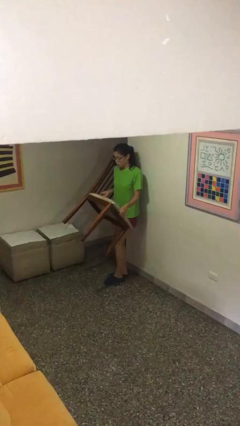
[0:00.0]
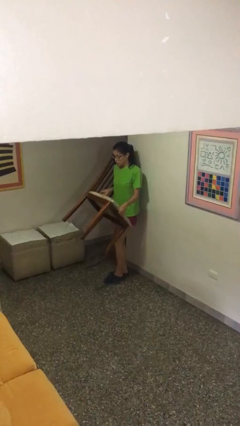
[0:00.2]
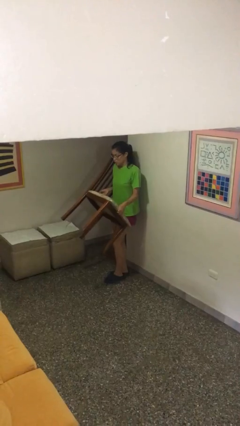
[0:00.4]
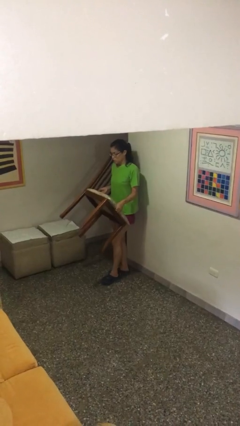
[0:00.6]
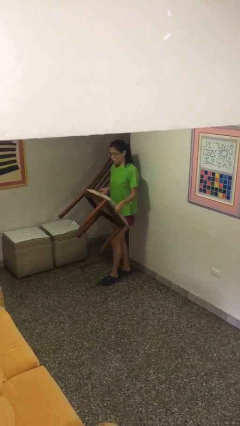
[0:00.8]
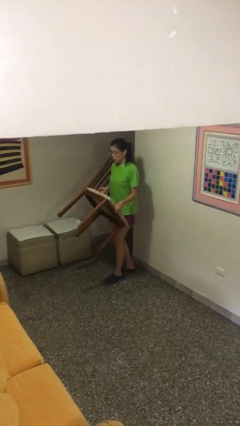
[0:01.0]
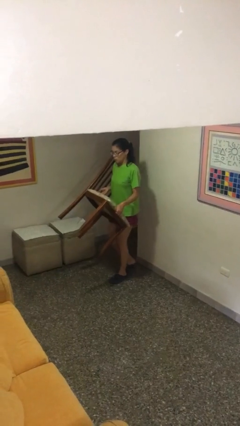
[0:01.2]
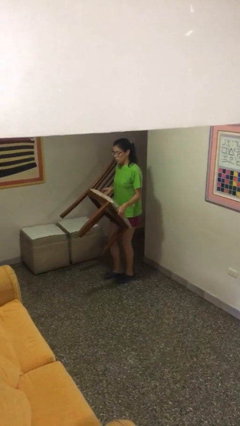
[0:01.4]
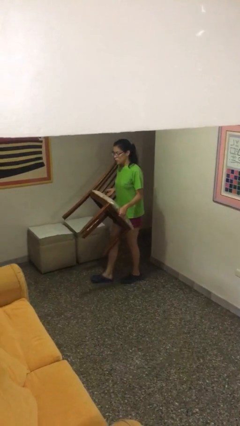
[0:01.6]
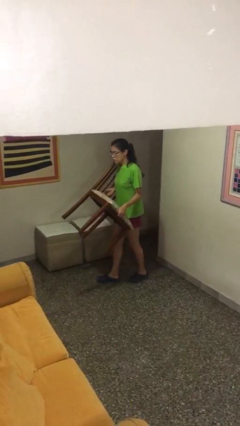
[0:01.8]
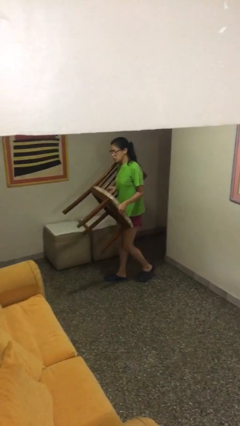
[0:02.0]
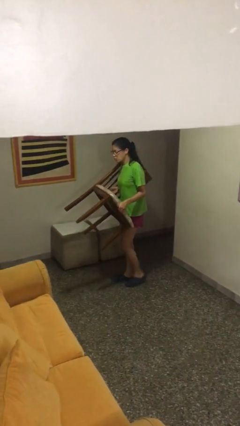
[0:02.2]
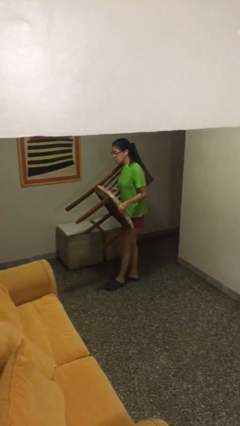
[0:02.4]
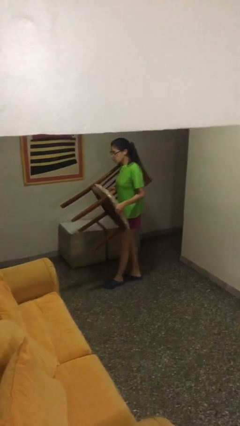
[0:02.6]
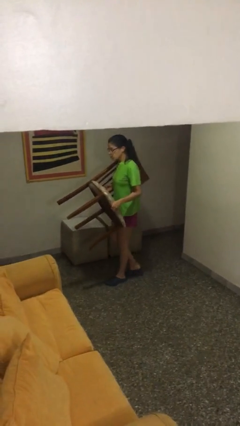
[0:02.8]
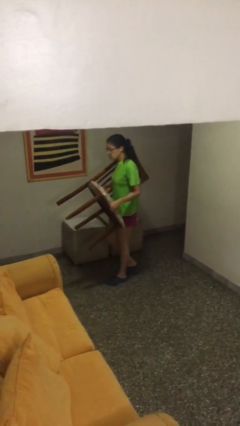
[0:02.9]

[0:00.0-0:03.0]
person carries heavy object

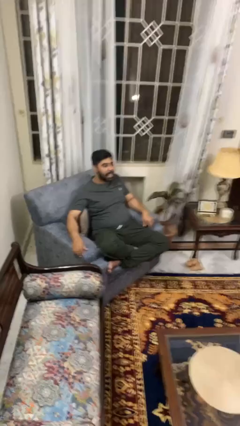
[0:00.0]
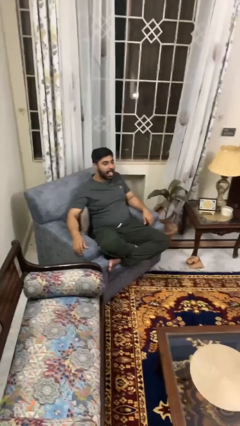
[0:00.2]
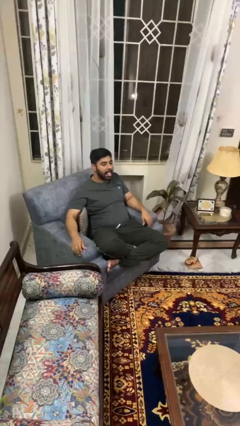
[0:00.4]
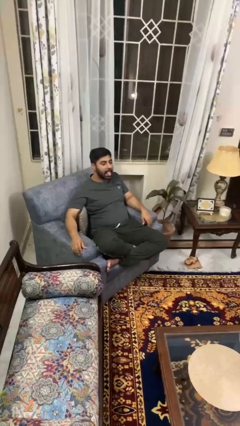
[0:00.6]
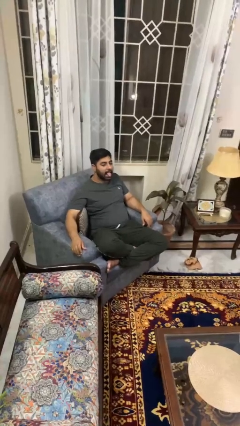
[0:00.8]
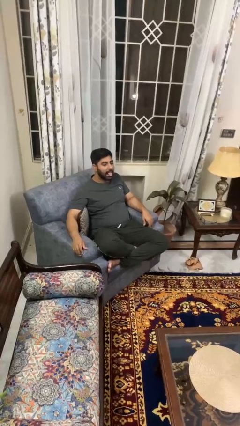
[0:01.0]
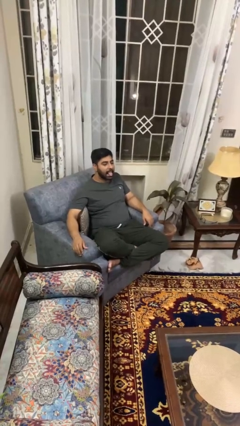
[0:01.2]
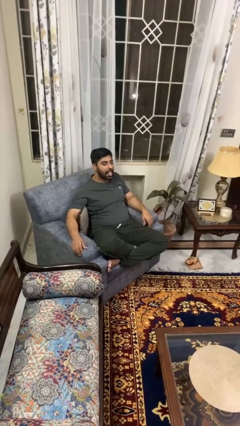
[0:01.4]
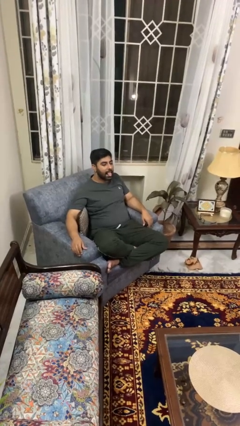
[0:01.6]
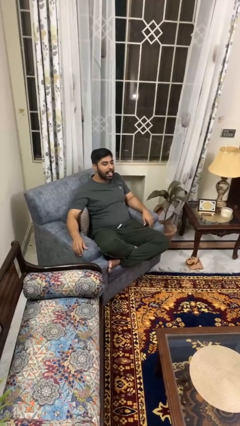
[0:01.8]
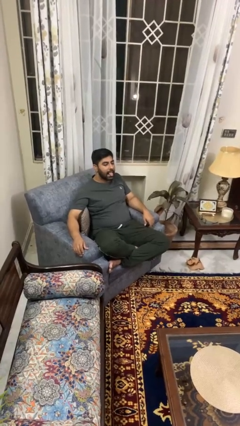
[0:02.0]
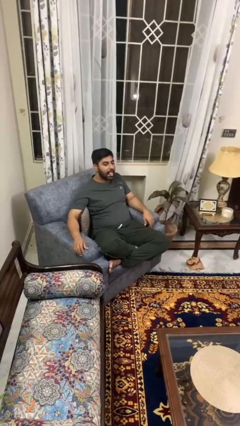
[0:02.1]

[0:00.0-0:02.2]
person sticks out tongue

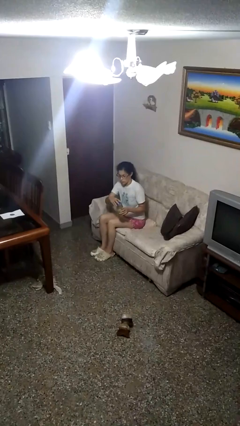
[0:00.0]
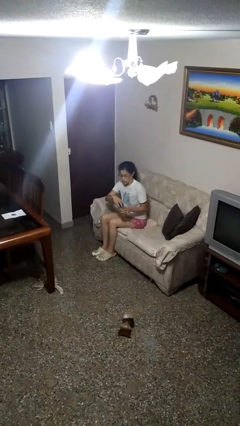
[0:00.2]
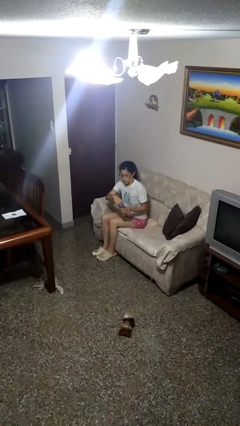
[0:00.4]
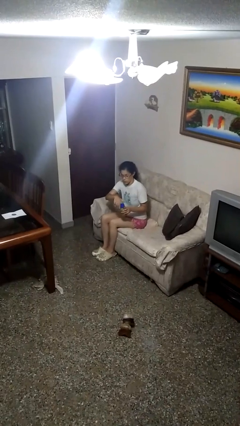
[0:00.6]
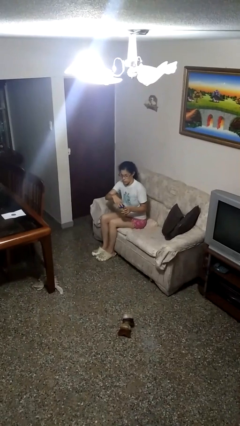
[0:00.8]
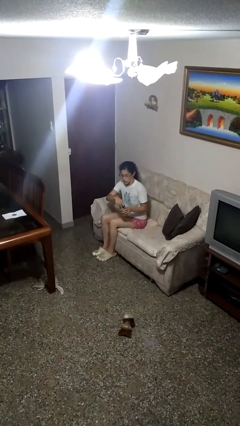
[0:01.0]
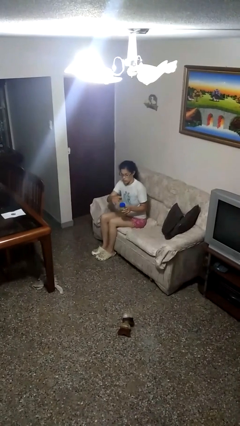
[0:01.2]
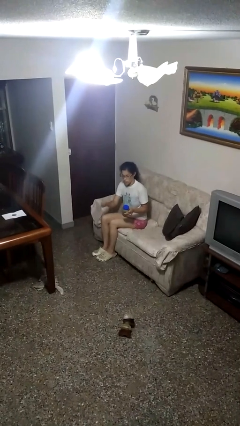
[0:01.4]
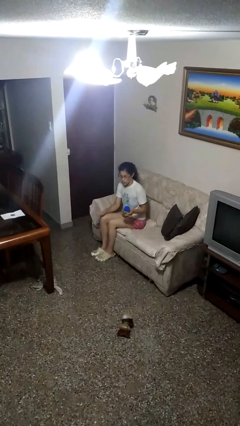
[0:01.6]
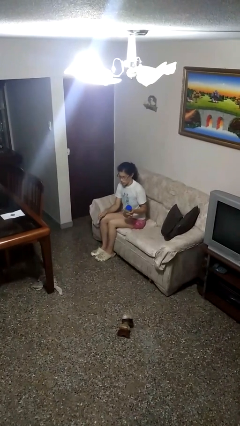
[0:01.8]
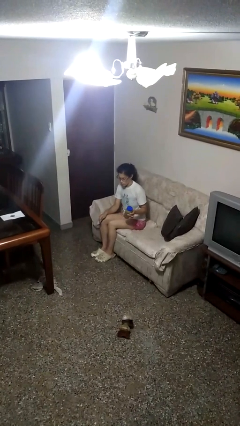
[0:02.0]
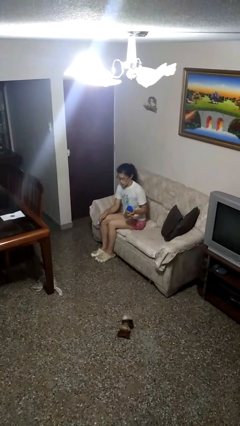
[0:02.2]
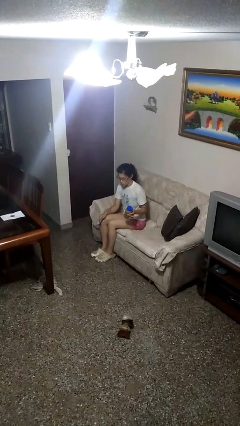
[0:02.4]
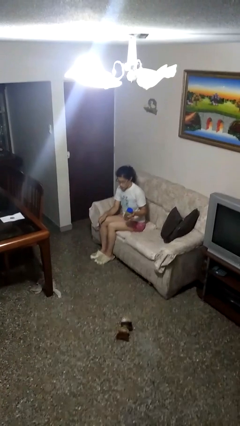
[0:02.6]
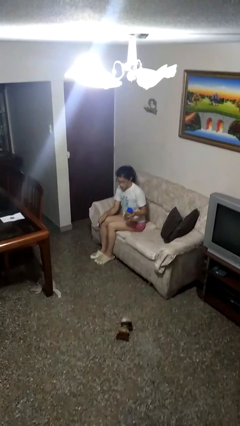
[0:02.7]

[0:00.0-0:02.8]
person closes jar

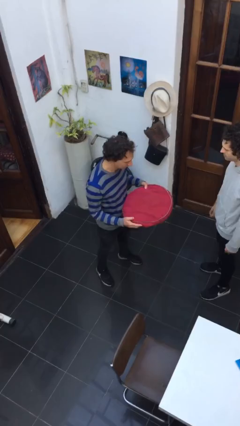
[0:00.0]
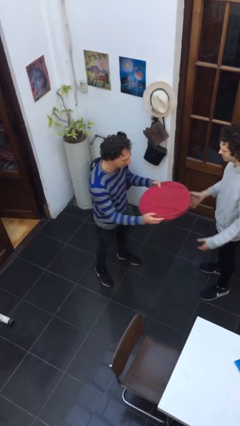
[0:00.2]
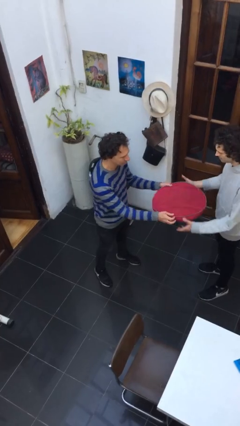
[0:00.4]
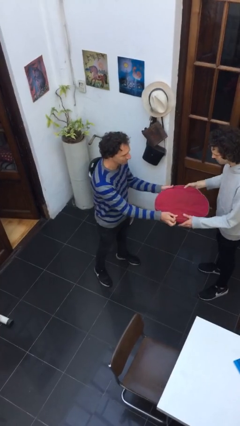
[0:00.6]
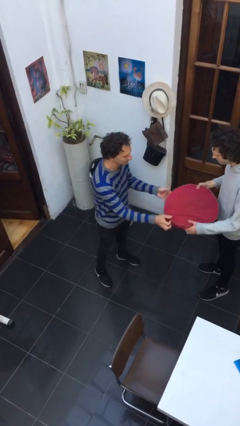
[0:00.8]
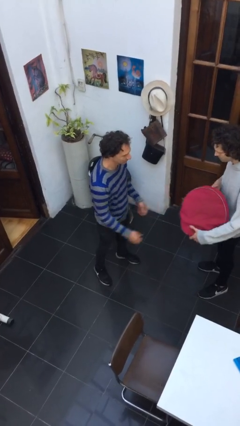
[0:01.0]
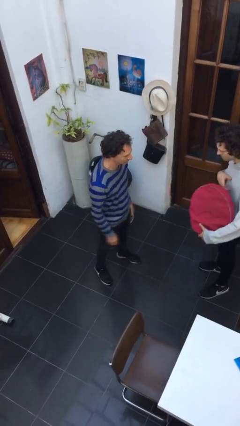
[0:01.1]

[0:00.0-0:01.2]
person transfers object to person

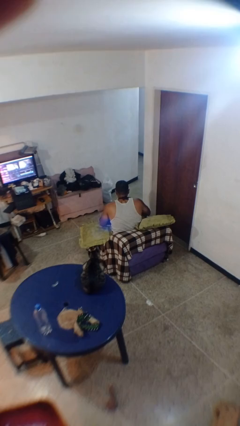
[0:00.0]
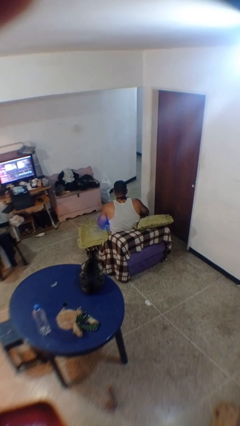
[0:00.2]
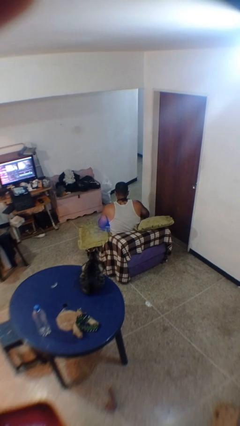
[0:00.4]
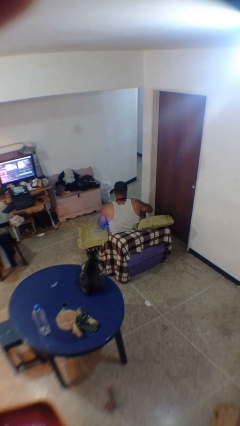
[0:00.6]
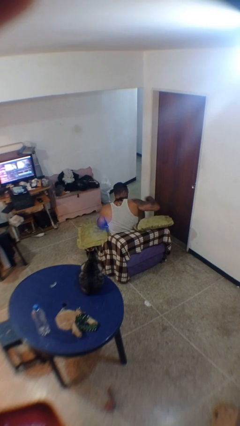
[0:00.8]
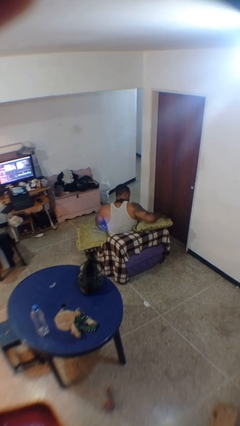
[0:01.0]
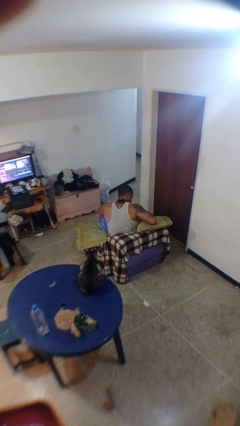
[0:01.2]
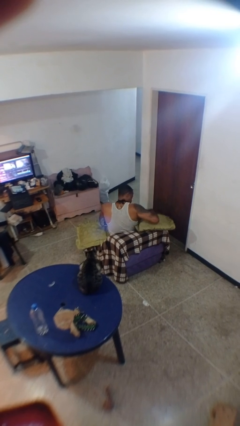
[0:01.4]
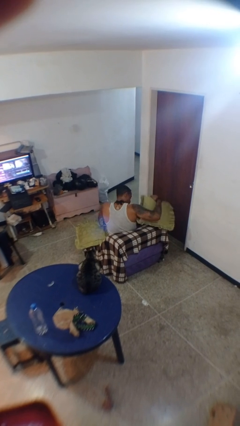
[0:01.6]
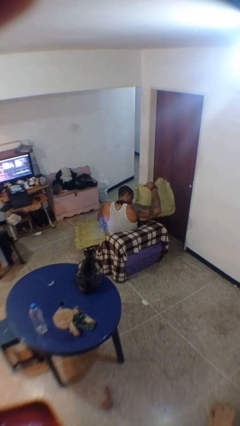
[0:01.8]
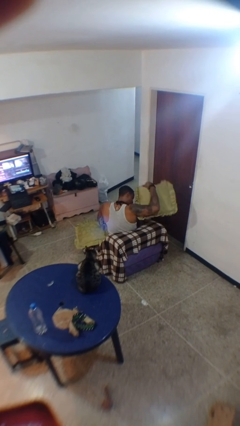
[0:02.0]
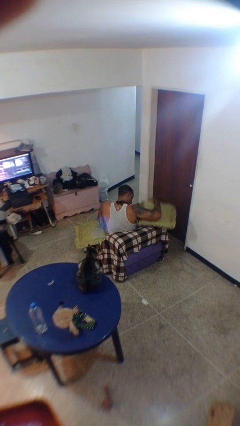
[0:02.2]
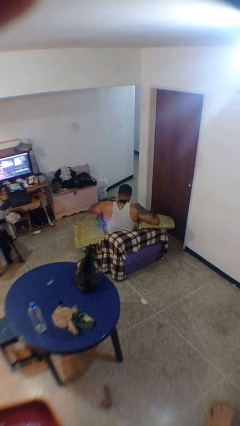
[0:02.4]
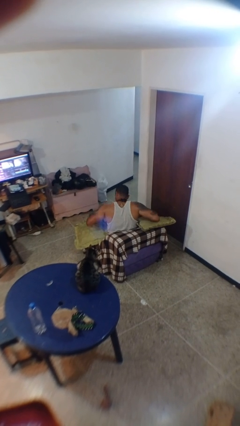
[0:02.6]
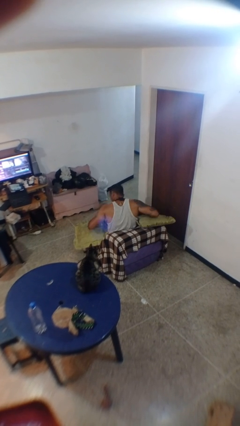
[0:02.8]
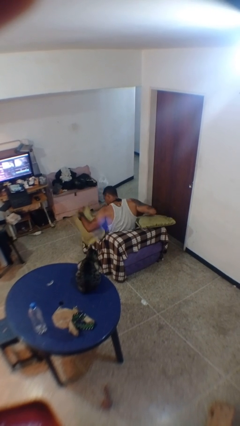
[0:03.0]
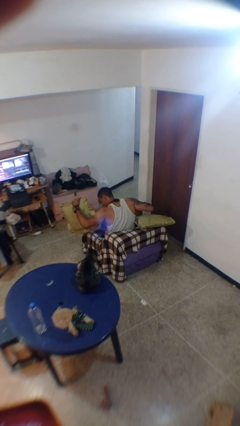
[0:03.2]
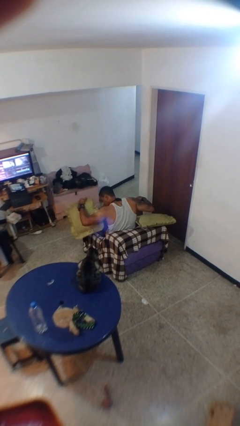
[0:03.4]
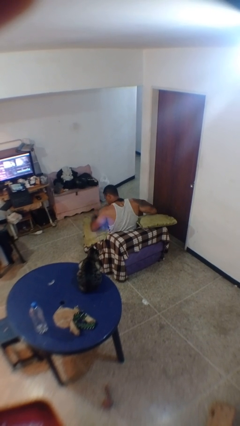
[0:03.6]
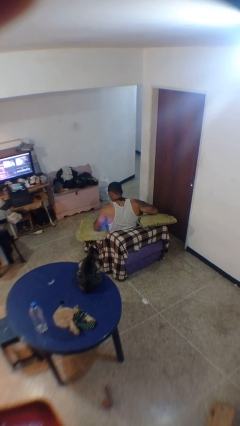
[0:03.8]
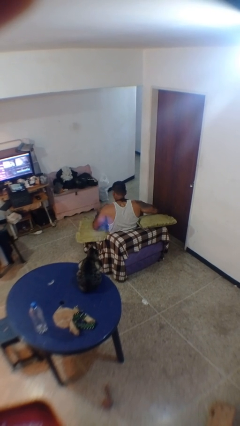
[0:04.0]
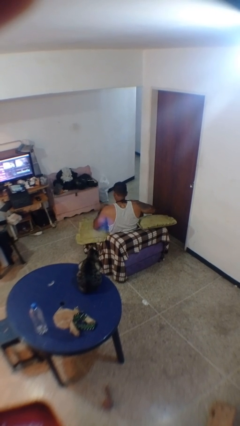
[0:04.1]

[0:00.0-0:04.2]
person searches in couch

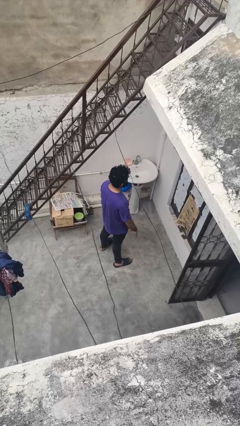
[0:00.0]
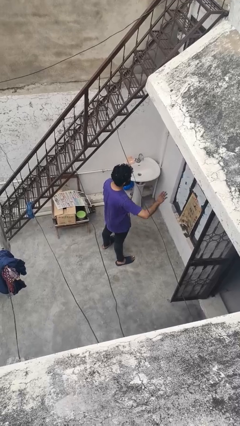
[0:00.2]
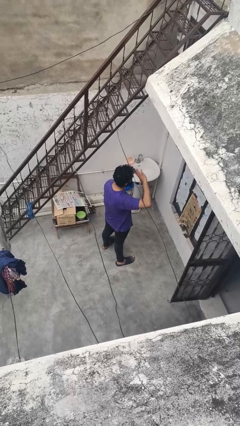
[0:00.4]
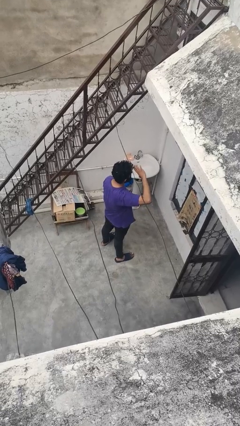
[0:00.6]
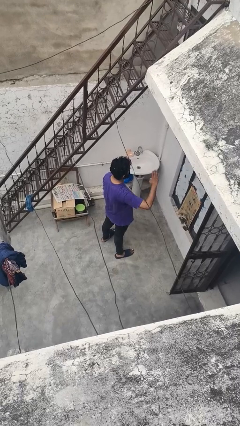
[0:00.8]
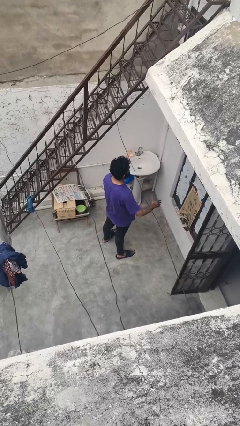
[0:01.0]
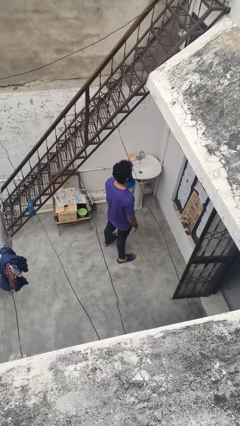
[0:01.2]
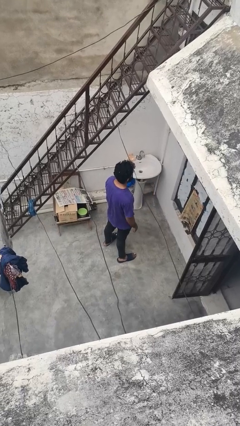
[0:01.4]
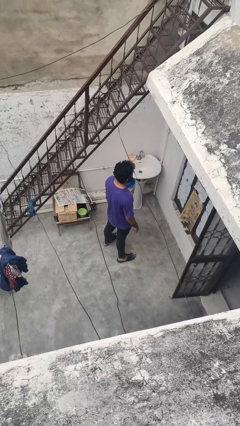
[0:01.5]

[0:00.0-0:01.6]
person salutes

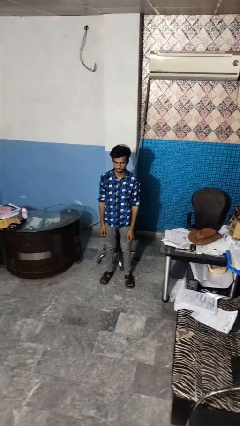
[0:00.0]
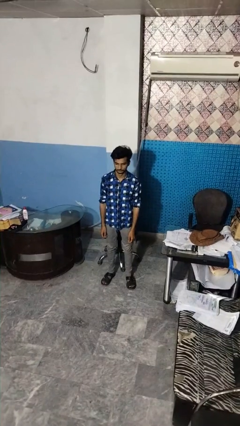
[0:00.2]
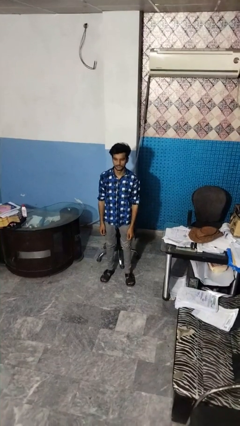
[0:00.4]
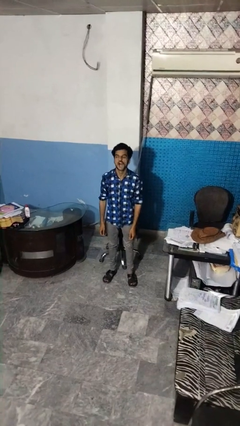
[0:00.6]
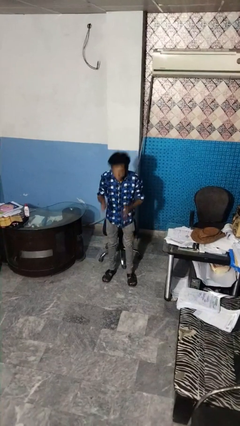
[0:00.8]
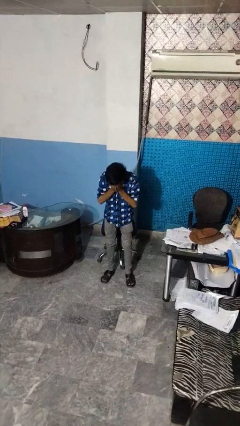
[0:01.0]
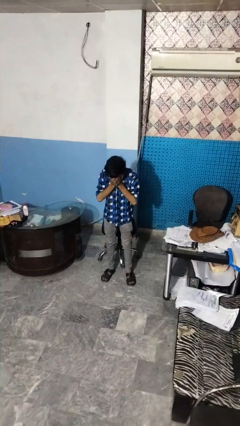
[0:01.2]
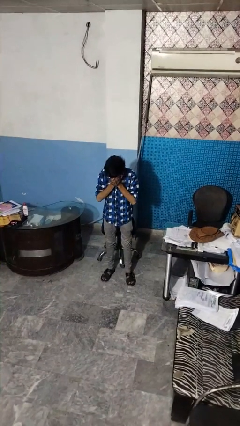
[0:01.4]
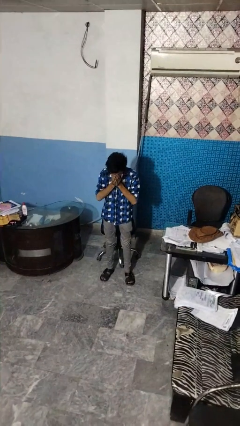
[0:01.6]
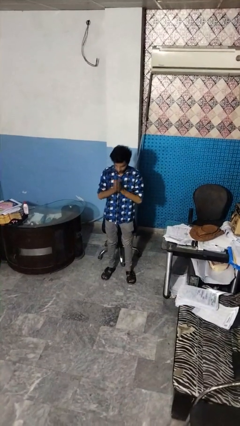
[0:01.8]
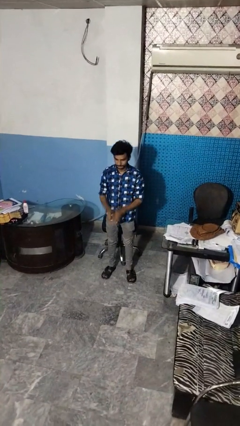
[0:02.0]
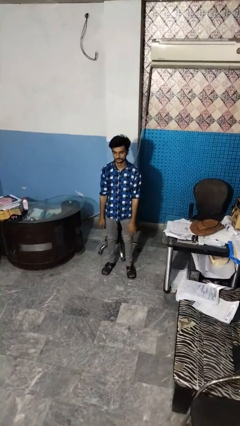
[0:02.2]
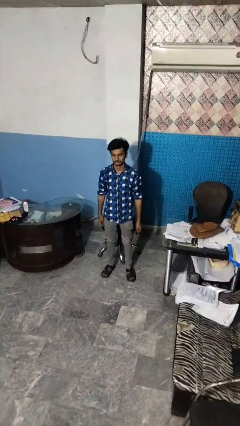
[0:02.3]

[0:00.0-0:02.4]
person sneezes into hand
